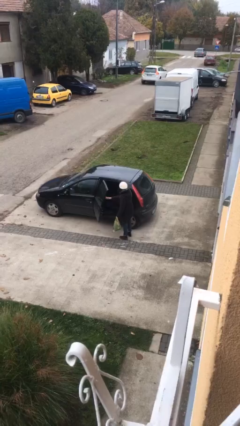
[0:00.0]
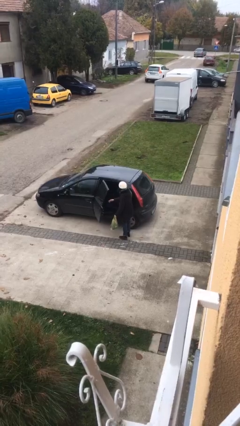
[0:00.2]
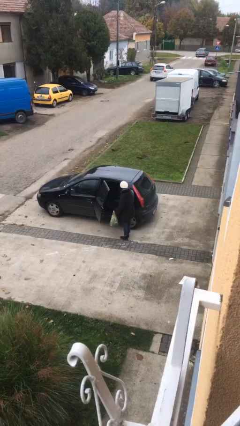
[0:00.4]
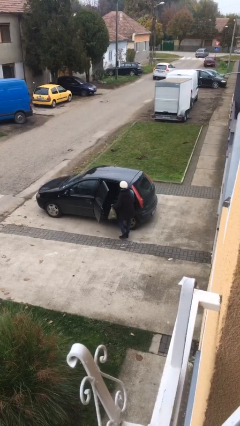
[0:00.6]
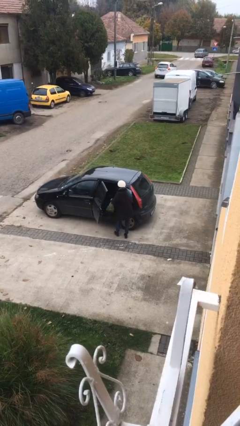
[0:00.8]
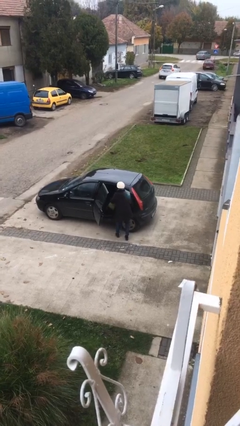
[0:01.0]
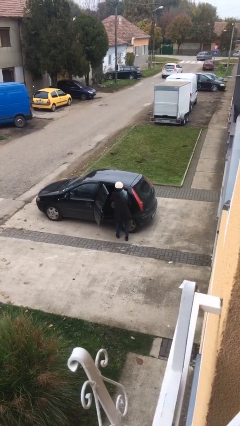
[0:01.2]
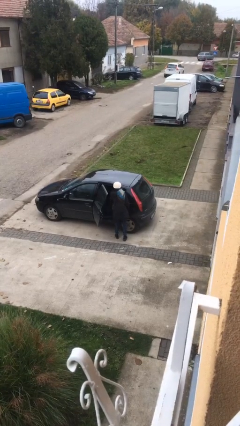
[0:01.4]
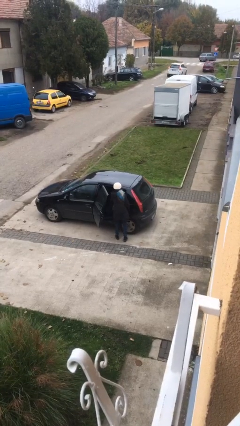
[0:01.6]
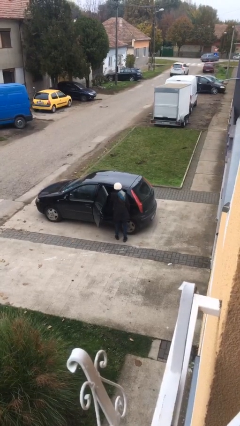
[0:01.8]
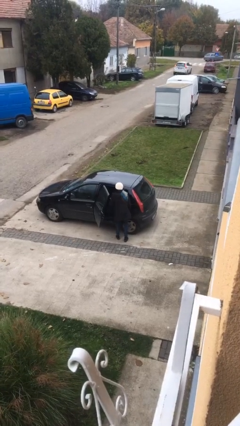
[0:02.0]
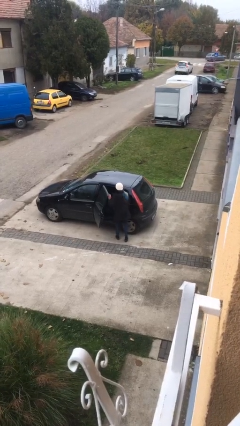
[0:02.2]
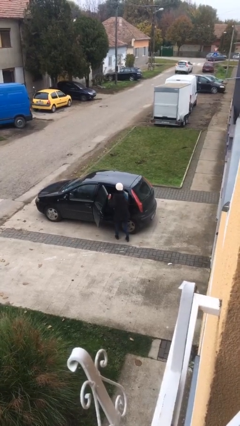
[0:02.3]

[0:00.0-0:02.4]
person loads car

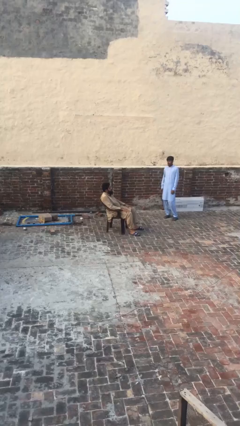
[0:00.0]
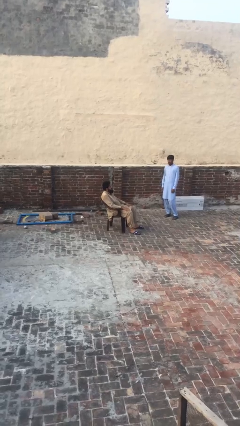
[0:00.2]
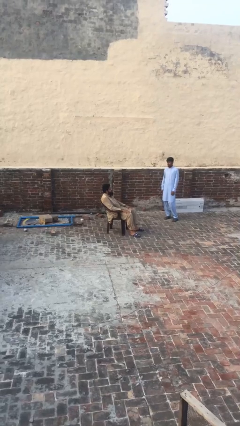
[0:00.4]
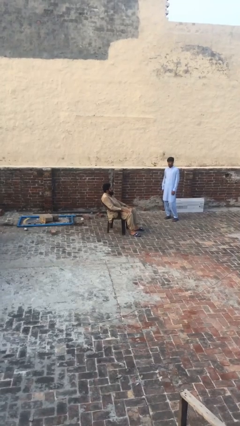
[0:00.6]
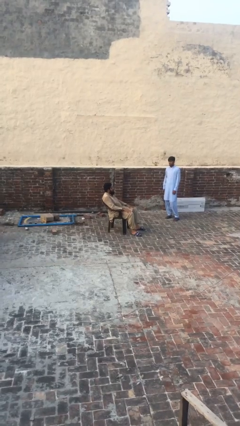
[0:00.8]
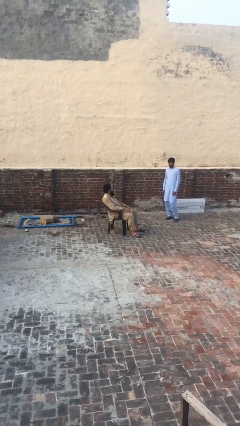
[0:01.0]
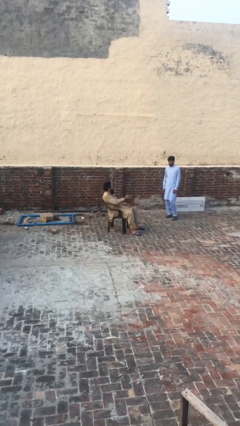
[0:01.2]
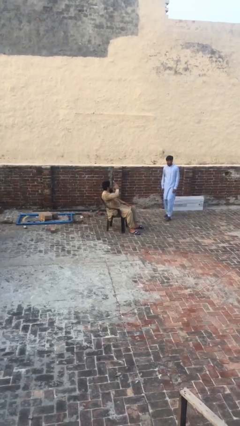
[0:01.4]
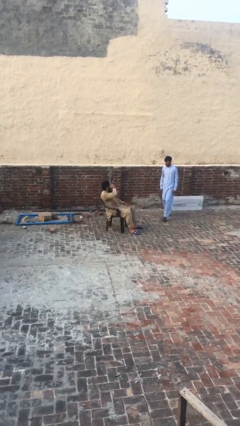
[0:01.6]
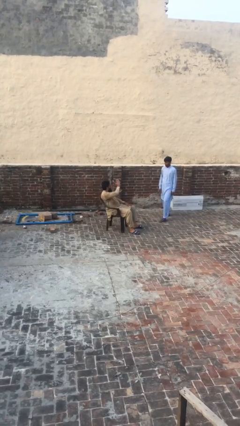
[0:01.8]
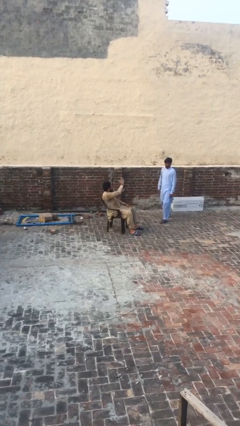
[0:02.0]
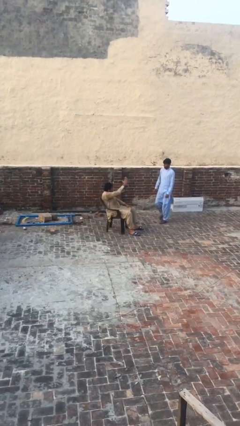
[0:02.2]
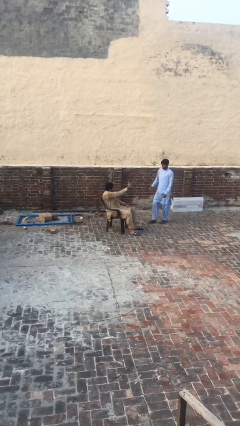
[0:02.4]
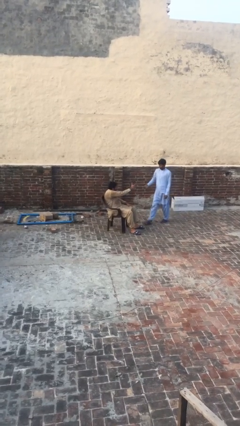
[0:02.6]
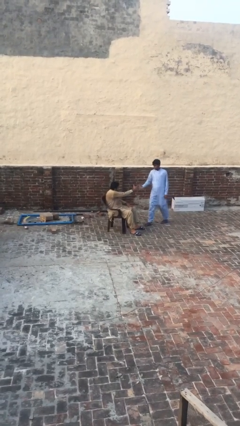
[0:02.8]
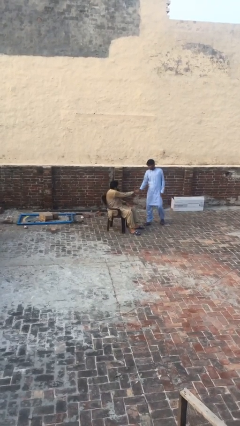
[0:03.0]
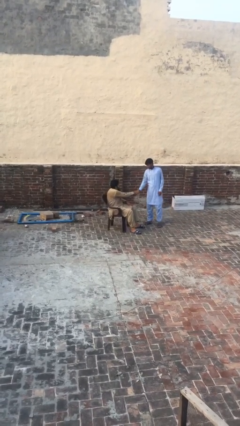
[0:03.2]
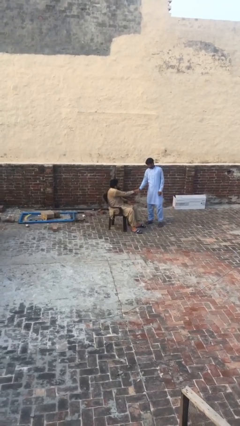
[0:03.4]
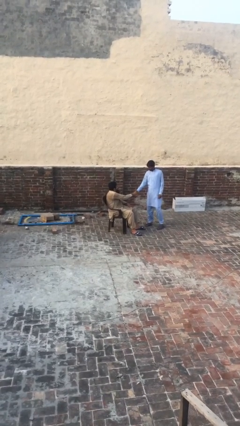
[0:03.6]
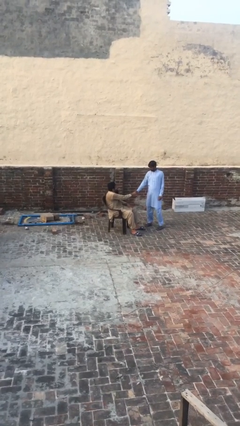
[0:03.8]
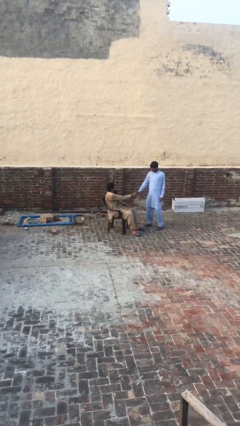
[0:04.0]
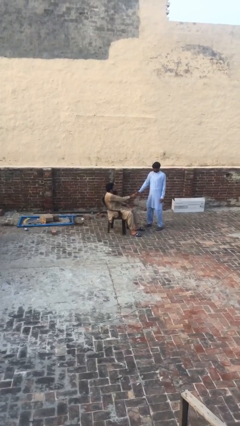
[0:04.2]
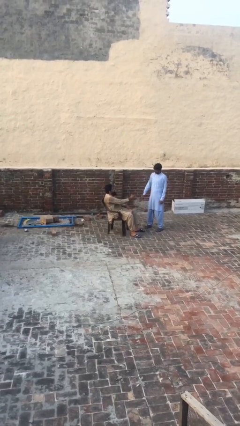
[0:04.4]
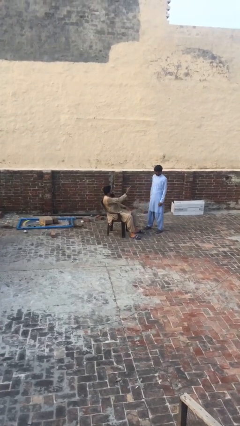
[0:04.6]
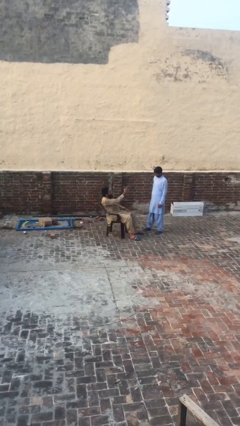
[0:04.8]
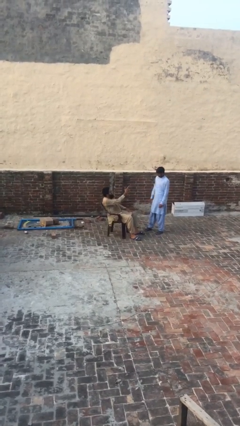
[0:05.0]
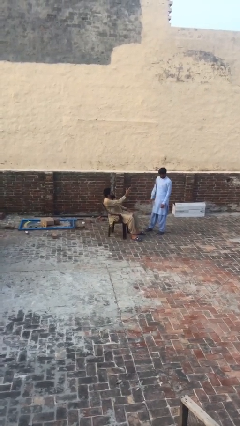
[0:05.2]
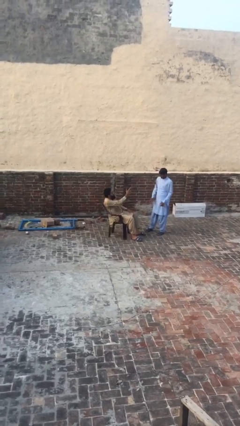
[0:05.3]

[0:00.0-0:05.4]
person shakes hand

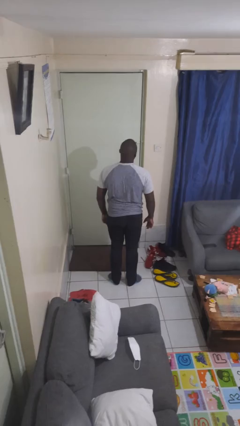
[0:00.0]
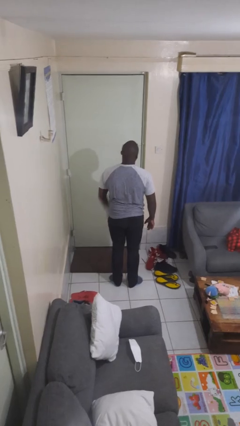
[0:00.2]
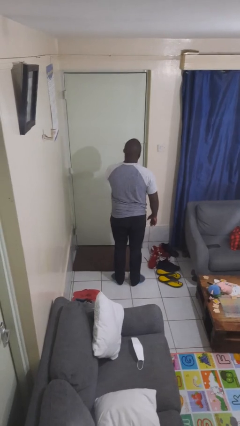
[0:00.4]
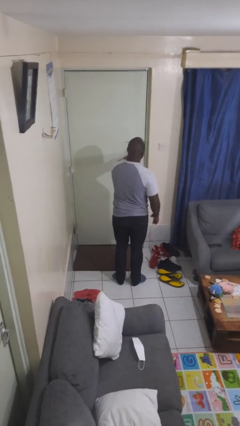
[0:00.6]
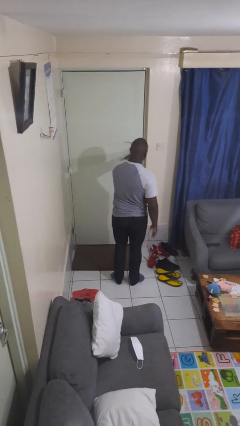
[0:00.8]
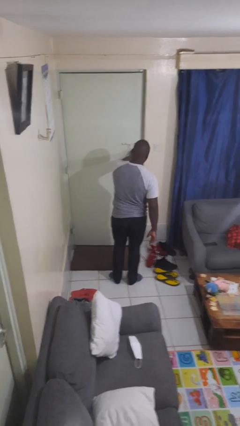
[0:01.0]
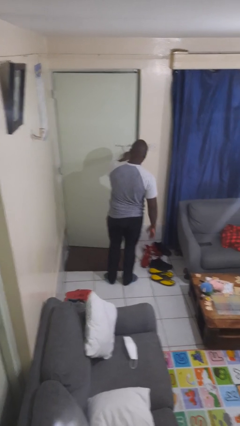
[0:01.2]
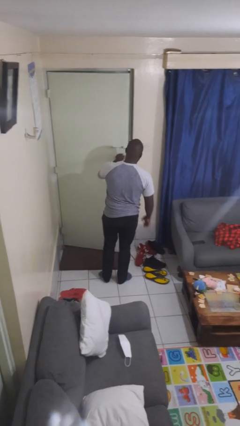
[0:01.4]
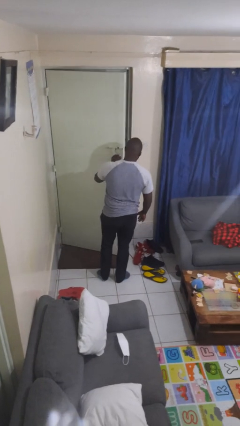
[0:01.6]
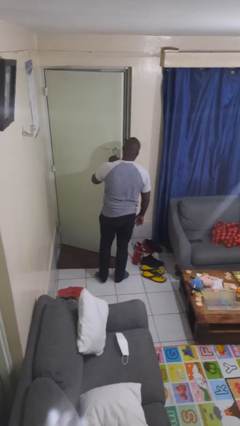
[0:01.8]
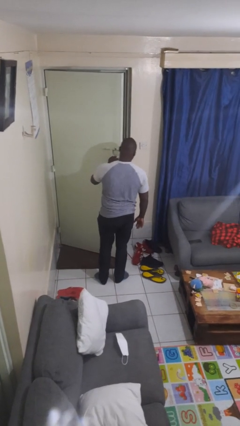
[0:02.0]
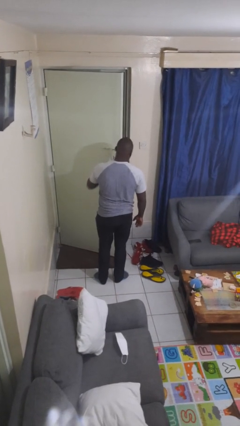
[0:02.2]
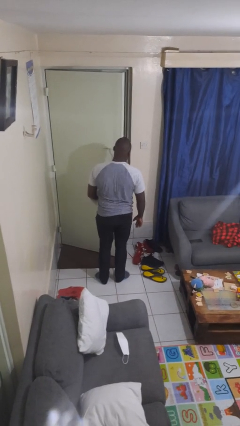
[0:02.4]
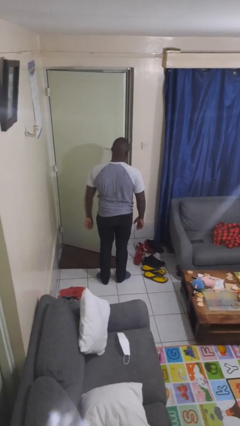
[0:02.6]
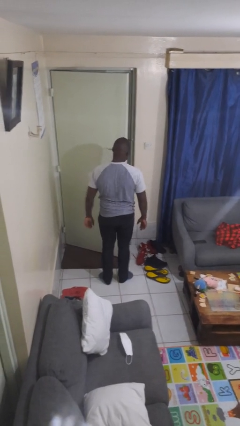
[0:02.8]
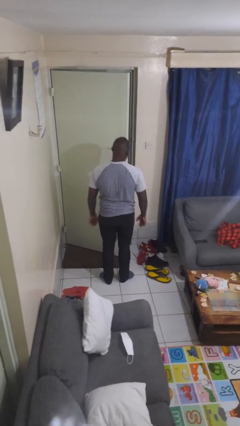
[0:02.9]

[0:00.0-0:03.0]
person opens facility door

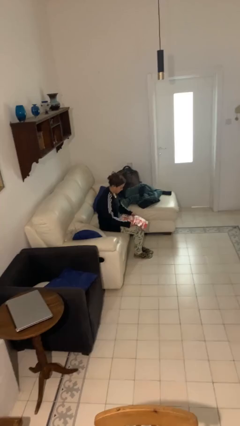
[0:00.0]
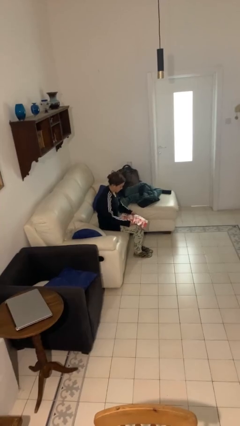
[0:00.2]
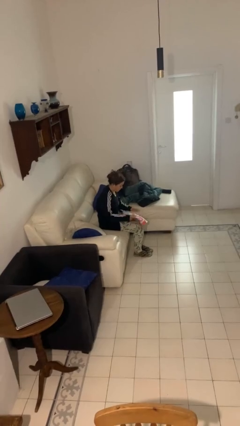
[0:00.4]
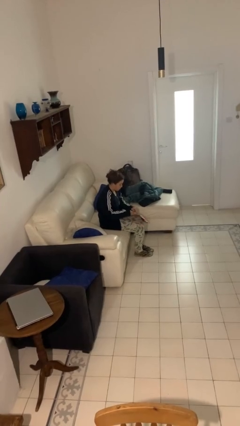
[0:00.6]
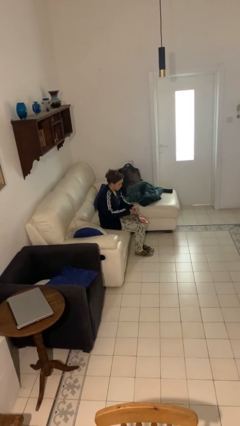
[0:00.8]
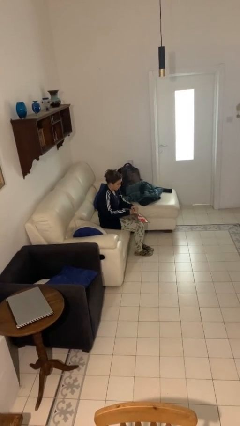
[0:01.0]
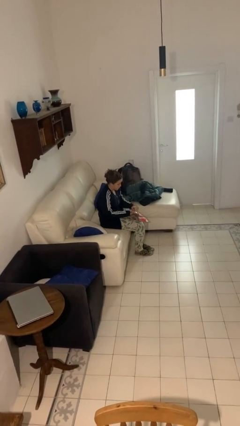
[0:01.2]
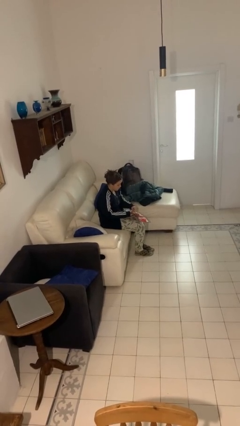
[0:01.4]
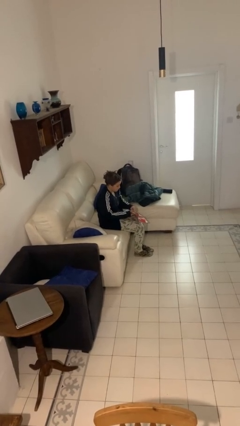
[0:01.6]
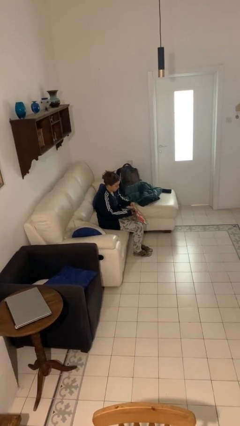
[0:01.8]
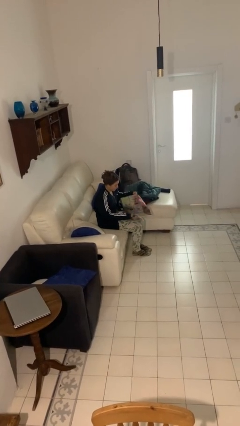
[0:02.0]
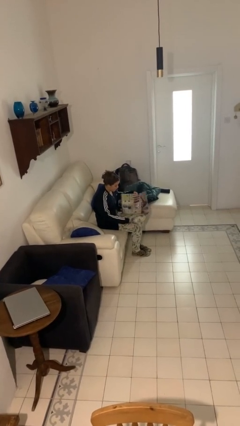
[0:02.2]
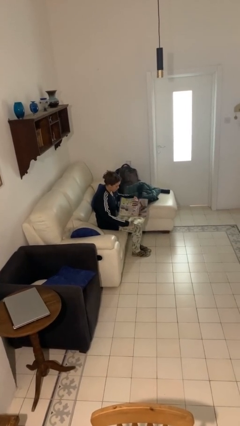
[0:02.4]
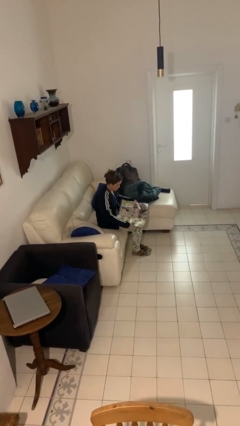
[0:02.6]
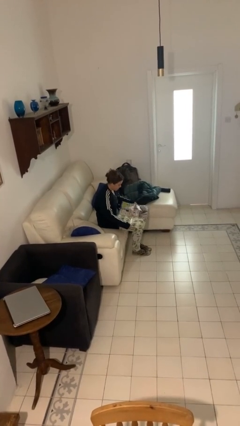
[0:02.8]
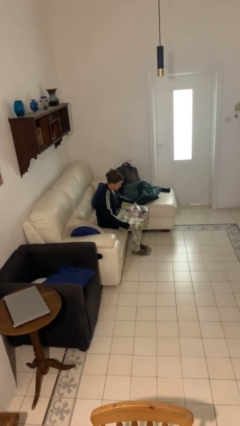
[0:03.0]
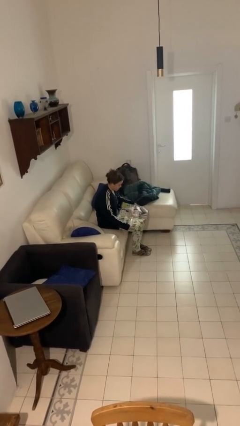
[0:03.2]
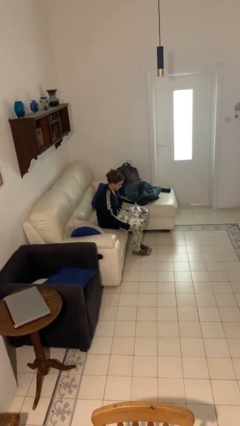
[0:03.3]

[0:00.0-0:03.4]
person reads newspaper

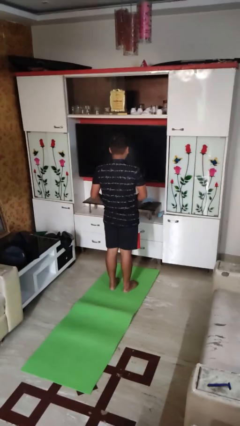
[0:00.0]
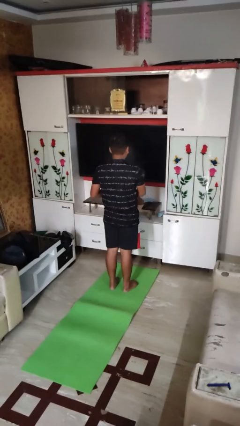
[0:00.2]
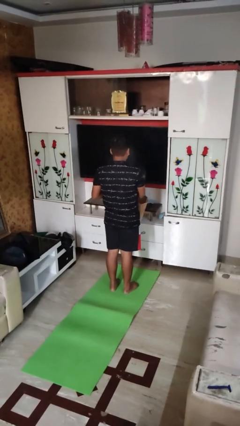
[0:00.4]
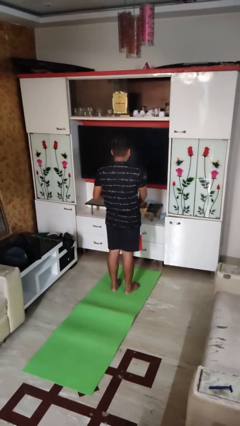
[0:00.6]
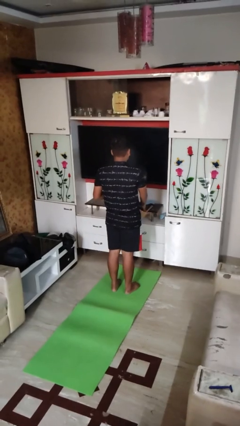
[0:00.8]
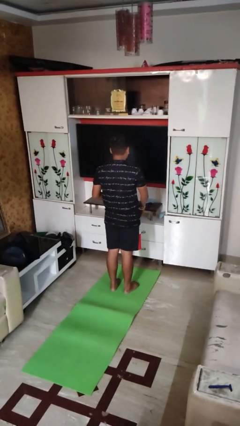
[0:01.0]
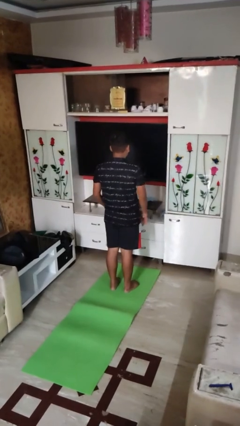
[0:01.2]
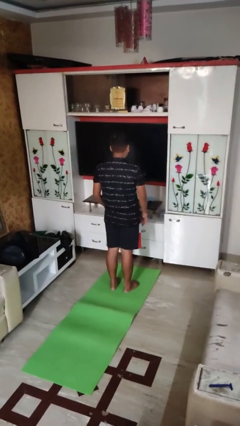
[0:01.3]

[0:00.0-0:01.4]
person puts object into bag

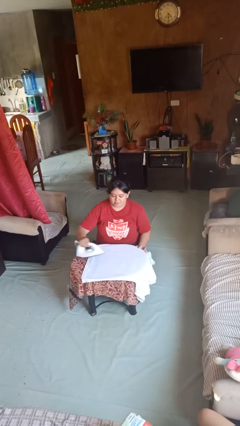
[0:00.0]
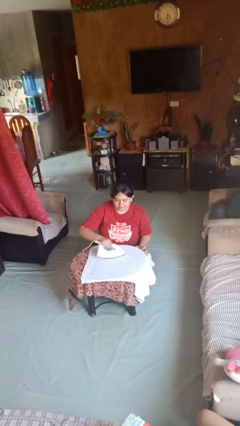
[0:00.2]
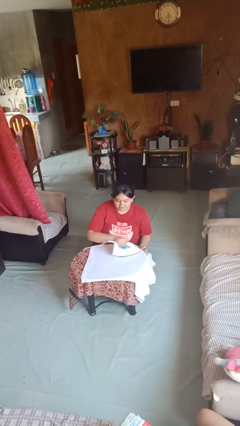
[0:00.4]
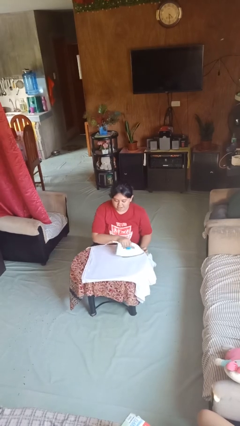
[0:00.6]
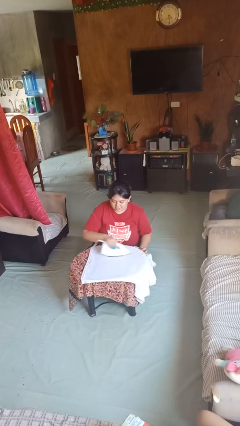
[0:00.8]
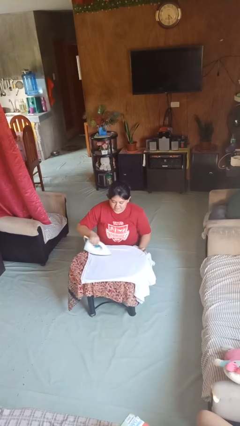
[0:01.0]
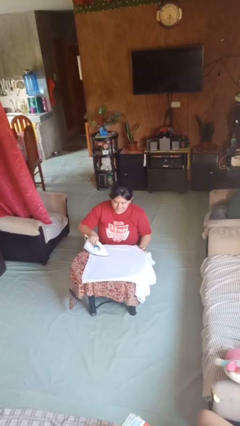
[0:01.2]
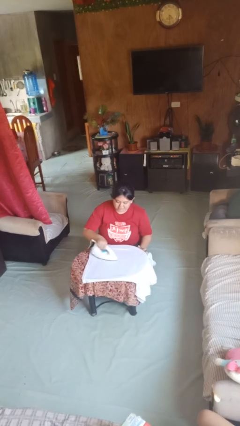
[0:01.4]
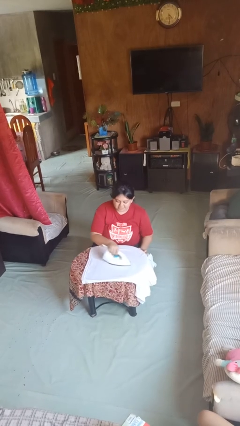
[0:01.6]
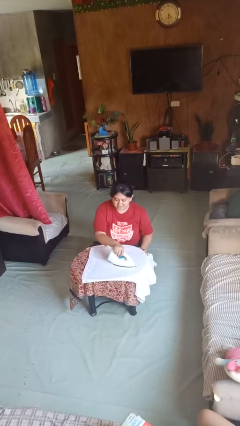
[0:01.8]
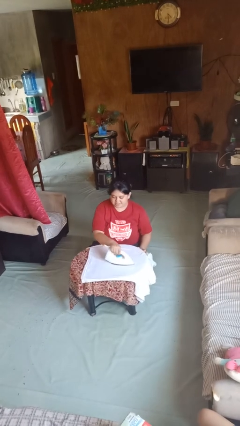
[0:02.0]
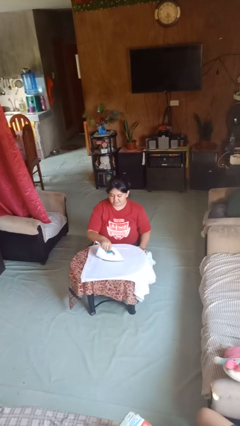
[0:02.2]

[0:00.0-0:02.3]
person irons clothes
